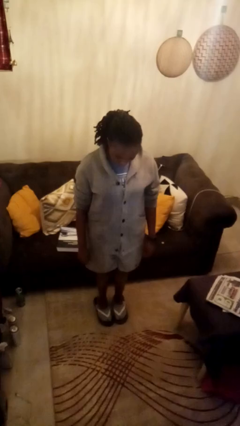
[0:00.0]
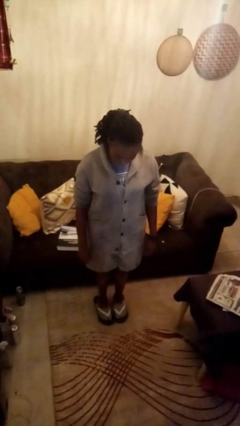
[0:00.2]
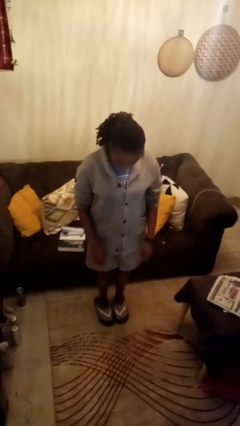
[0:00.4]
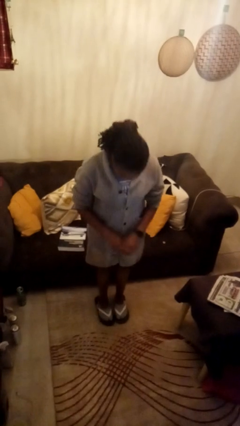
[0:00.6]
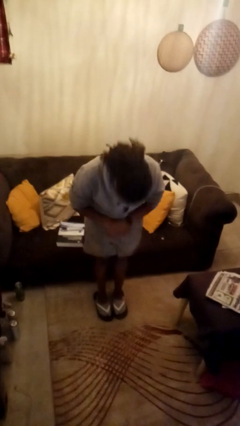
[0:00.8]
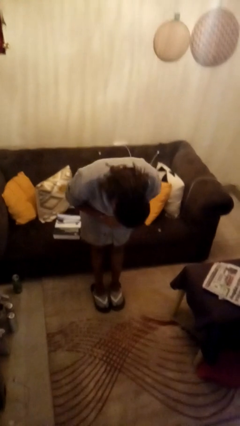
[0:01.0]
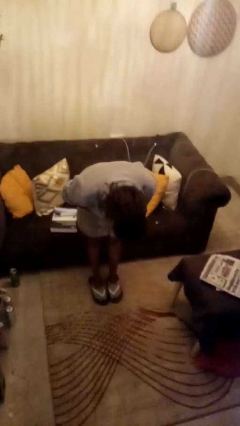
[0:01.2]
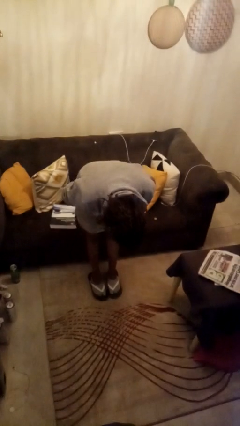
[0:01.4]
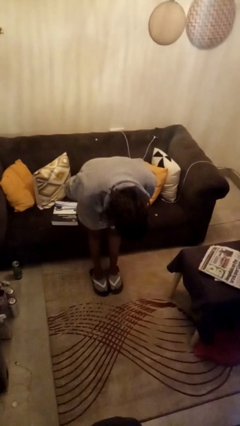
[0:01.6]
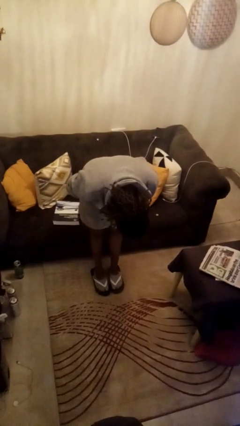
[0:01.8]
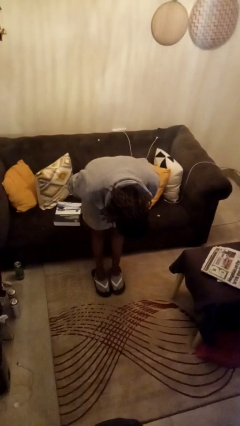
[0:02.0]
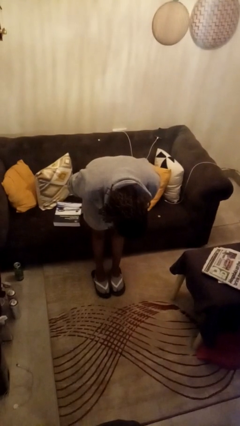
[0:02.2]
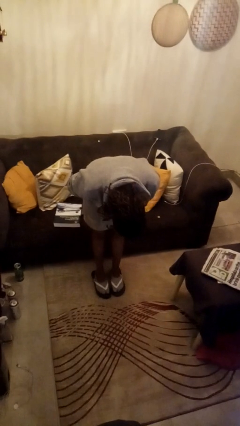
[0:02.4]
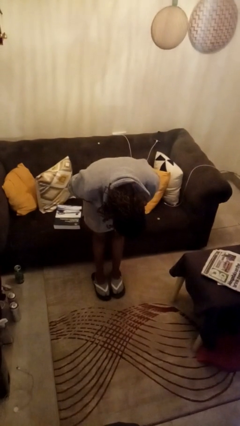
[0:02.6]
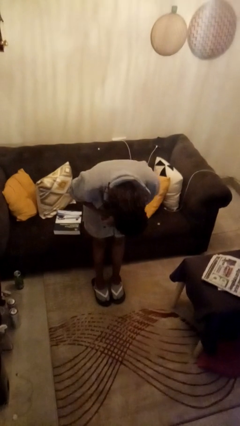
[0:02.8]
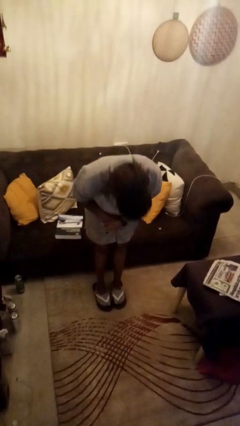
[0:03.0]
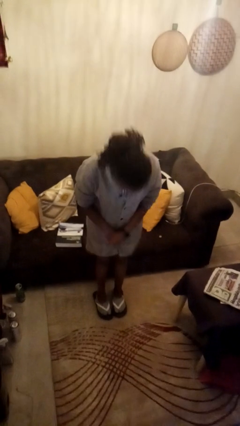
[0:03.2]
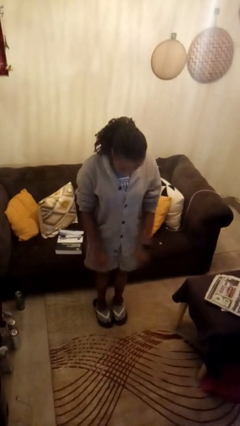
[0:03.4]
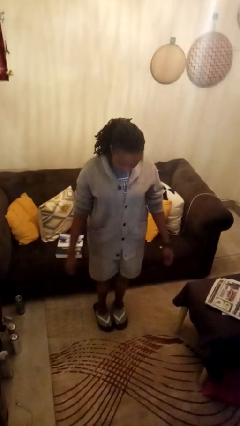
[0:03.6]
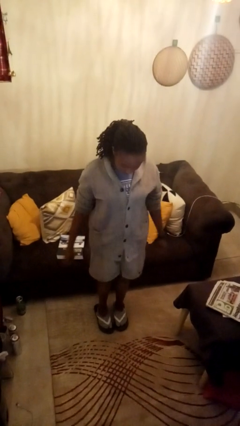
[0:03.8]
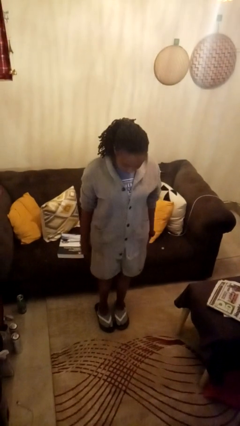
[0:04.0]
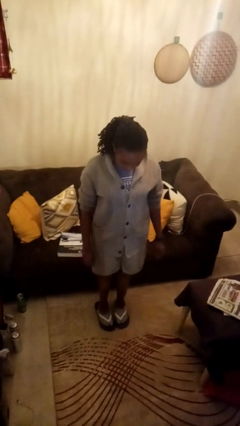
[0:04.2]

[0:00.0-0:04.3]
person bows

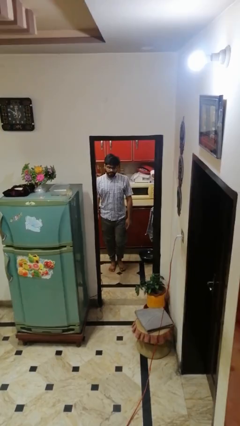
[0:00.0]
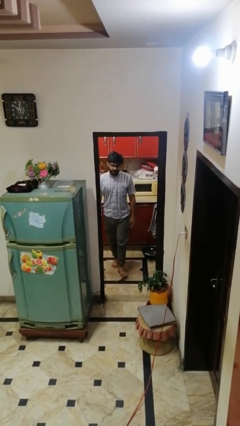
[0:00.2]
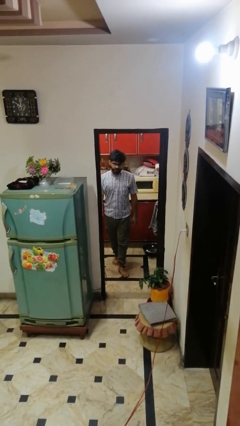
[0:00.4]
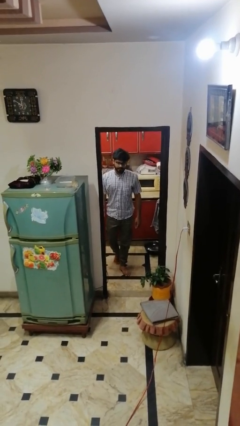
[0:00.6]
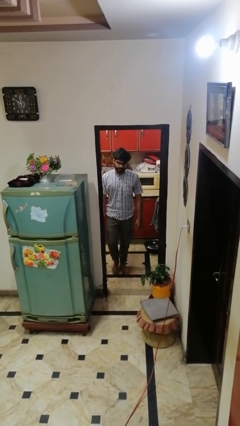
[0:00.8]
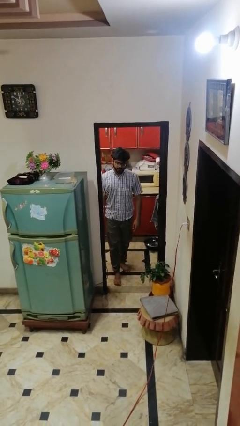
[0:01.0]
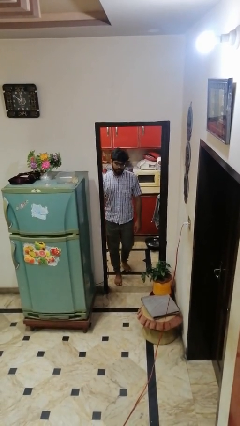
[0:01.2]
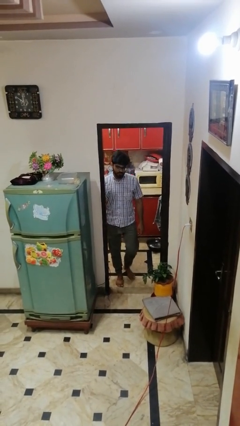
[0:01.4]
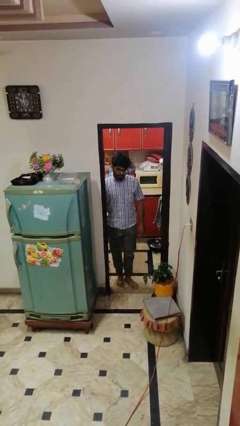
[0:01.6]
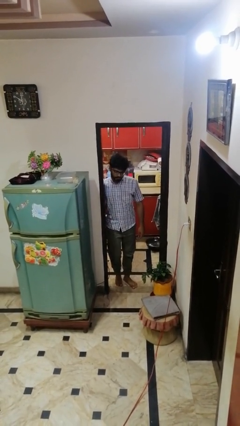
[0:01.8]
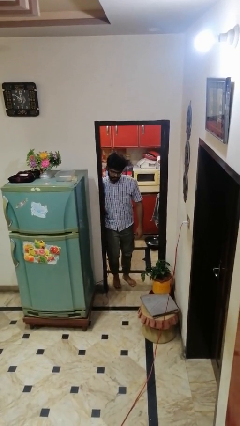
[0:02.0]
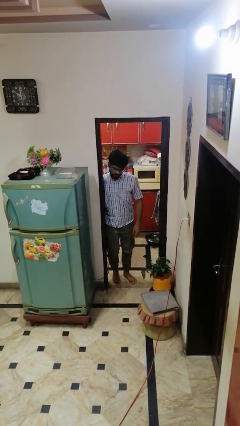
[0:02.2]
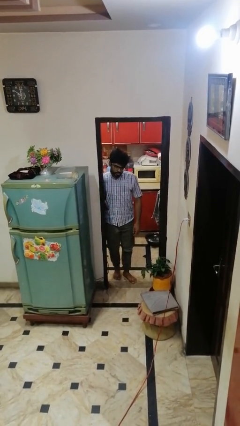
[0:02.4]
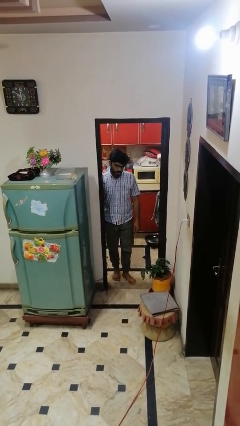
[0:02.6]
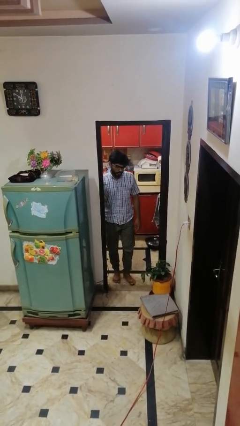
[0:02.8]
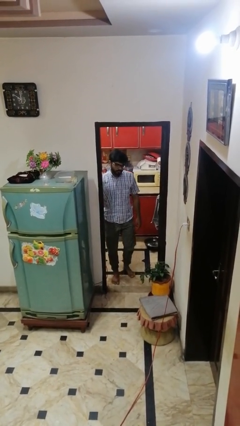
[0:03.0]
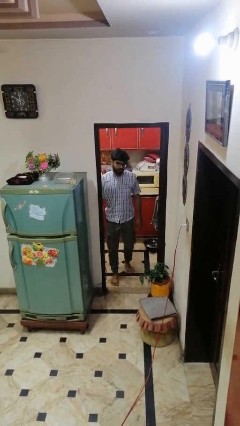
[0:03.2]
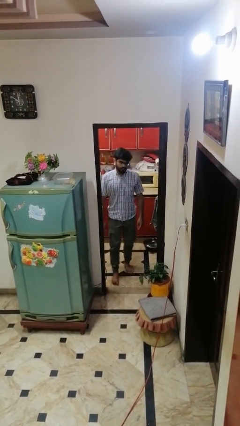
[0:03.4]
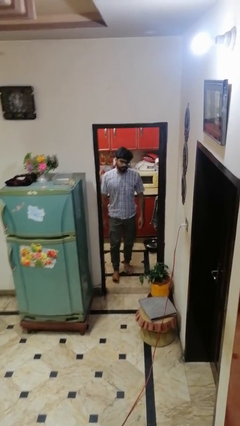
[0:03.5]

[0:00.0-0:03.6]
person bumps into wall

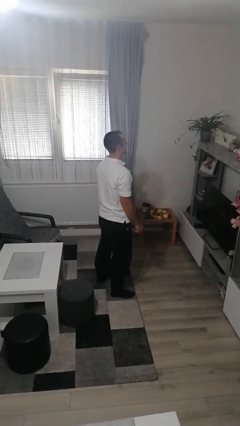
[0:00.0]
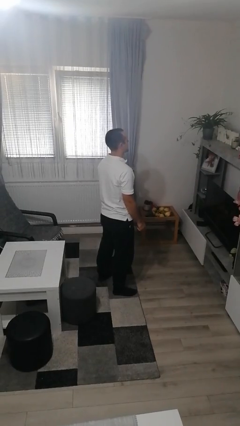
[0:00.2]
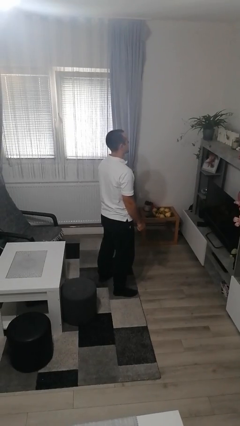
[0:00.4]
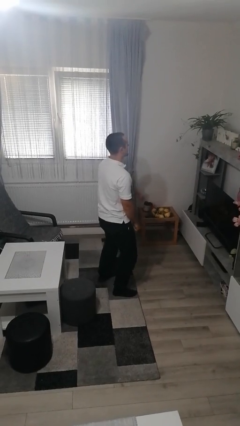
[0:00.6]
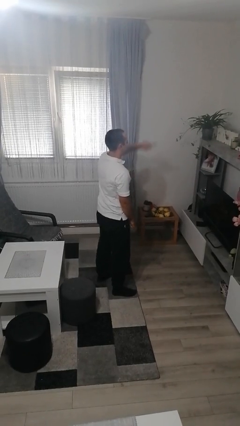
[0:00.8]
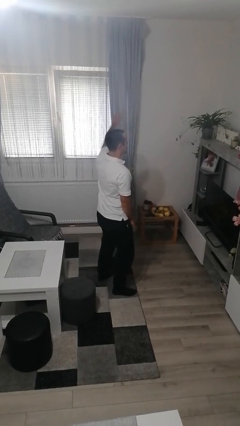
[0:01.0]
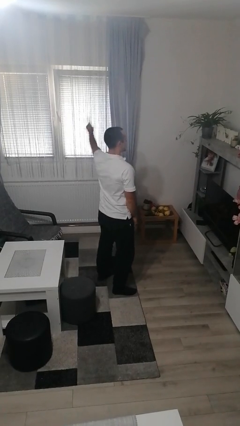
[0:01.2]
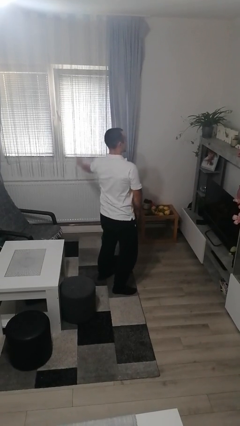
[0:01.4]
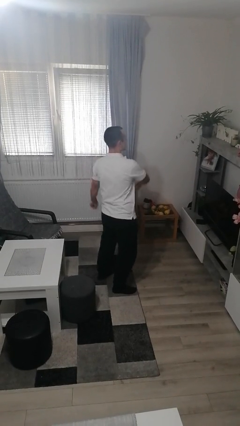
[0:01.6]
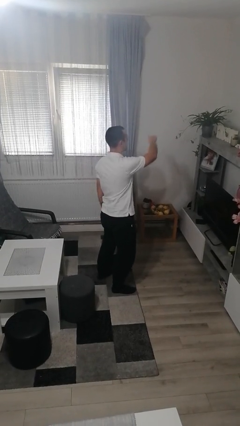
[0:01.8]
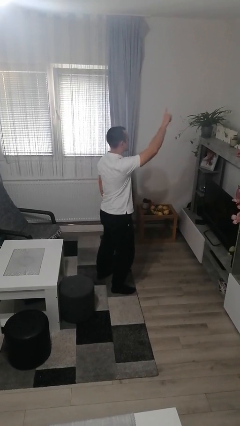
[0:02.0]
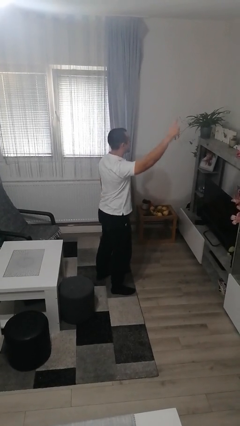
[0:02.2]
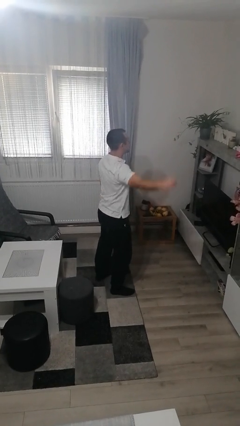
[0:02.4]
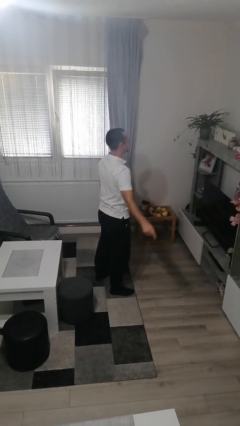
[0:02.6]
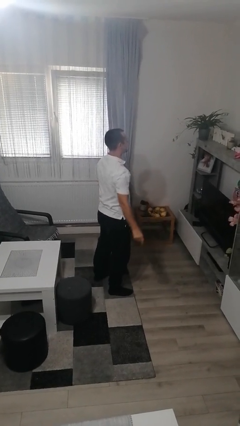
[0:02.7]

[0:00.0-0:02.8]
person dances in place

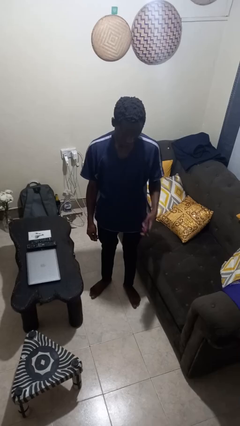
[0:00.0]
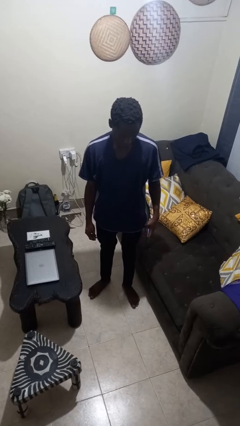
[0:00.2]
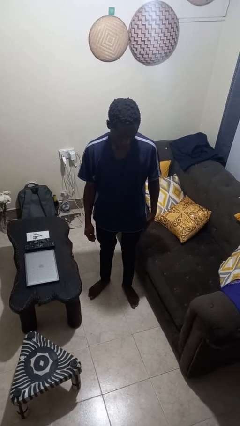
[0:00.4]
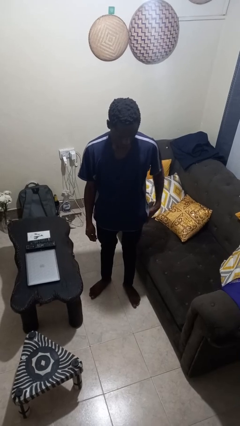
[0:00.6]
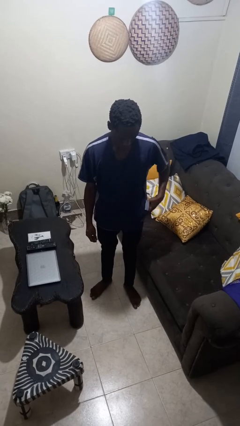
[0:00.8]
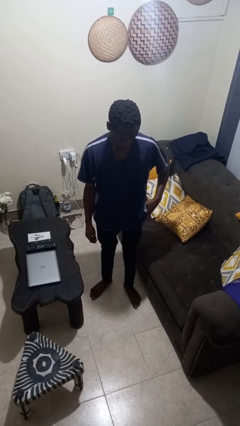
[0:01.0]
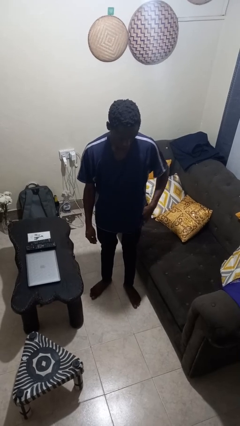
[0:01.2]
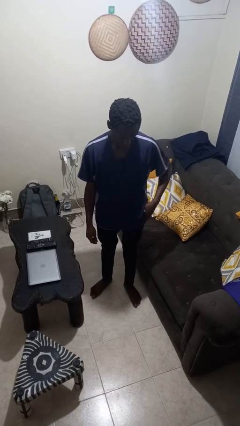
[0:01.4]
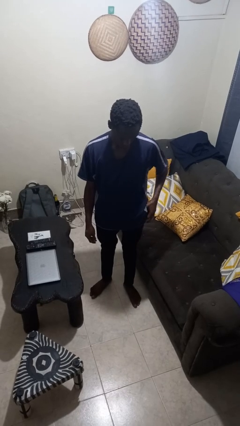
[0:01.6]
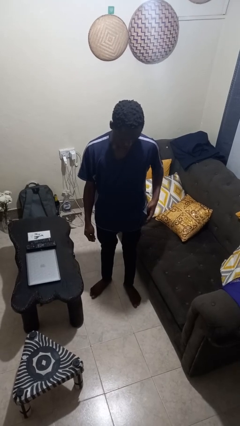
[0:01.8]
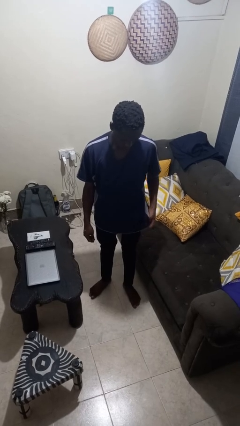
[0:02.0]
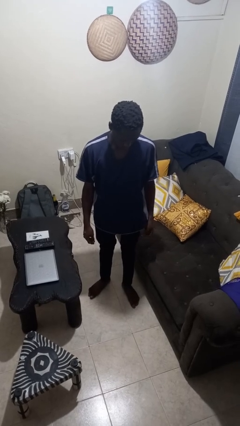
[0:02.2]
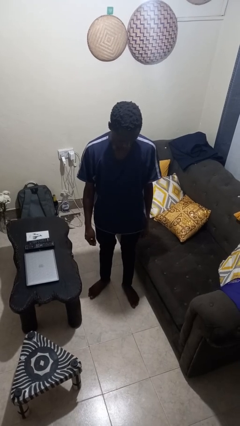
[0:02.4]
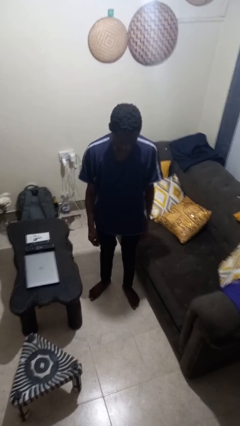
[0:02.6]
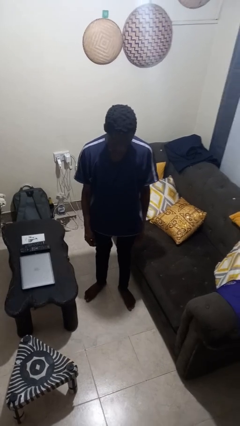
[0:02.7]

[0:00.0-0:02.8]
person puts phone into pocket

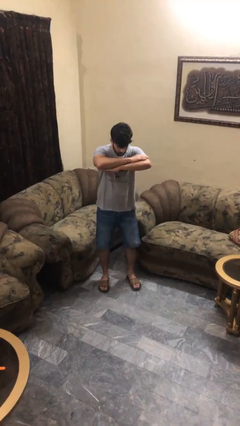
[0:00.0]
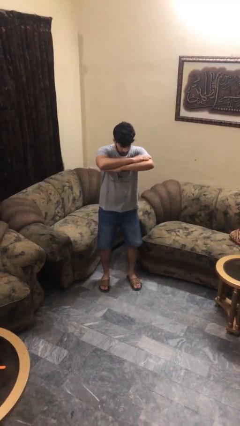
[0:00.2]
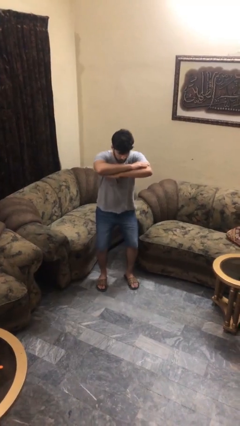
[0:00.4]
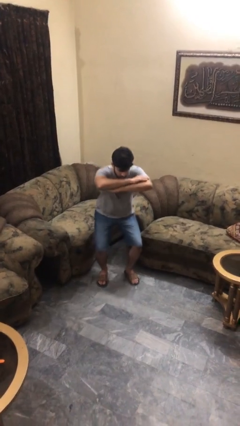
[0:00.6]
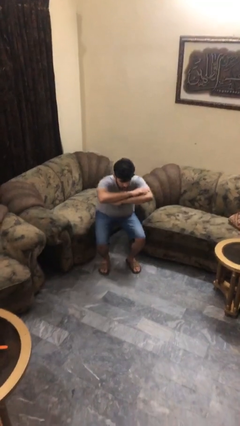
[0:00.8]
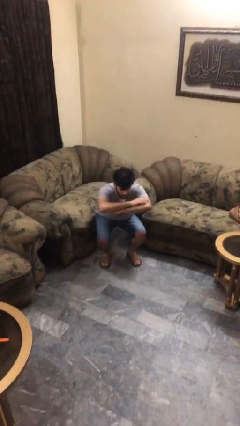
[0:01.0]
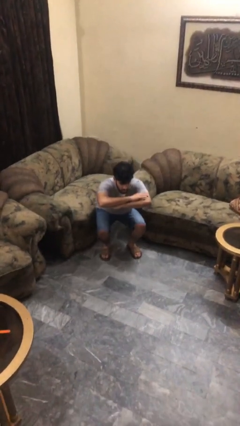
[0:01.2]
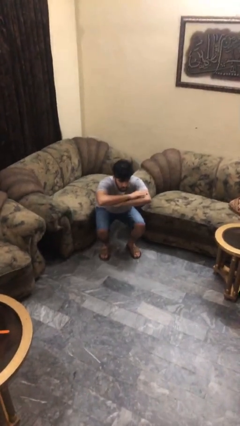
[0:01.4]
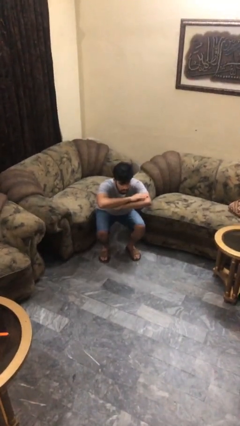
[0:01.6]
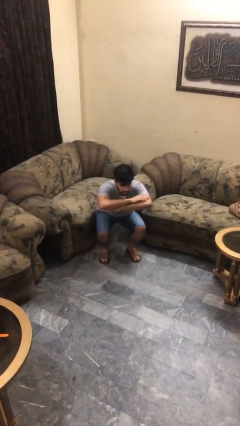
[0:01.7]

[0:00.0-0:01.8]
person squats

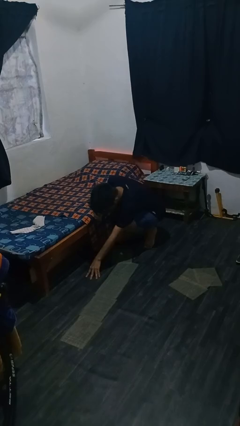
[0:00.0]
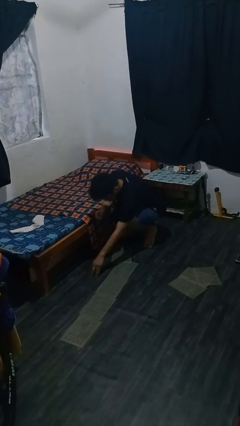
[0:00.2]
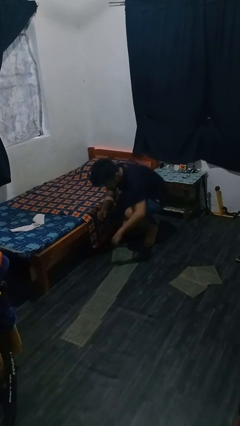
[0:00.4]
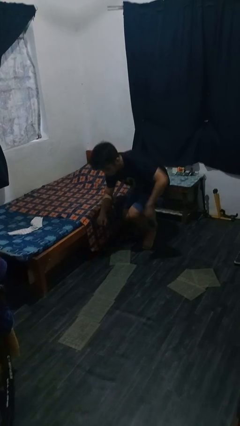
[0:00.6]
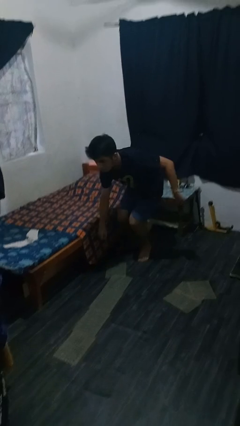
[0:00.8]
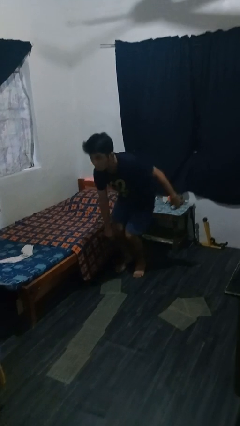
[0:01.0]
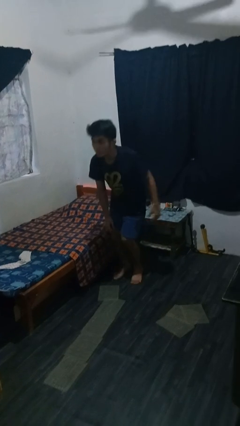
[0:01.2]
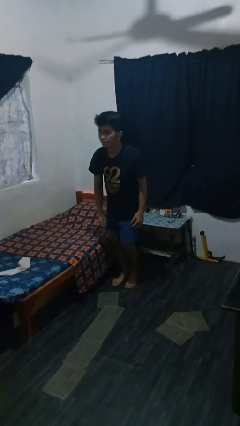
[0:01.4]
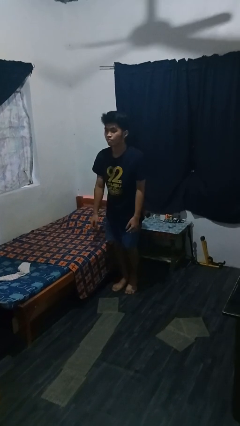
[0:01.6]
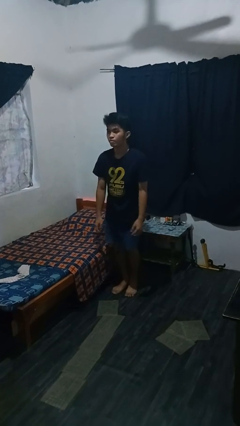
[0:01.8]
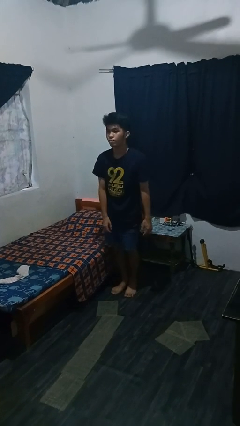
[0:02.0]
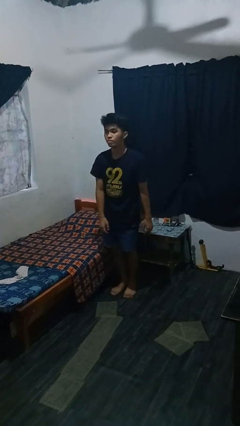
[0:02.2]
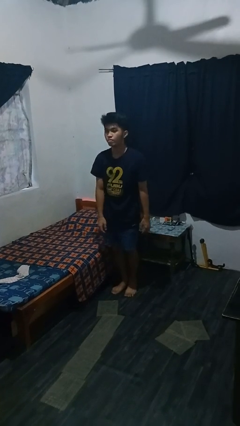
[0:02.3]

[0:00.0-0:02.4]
person stands up from floor
